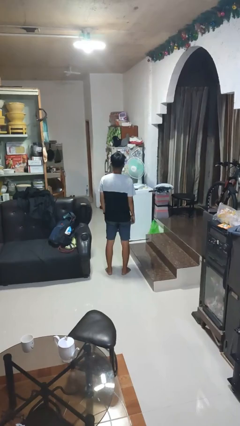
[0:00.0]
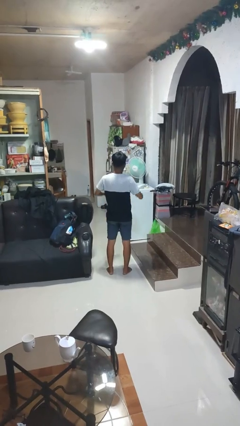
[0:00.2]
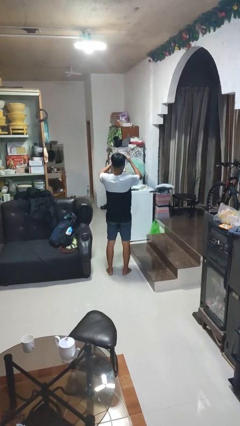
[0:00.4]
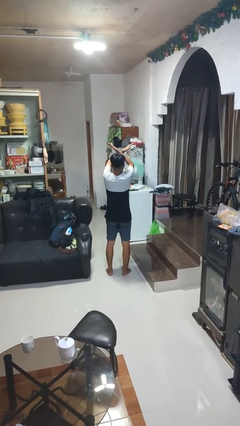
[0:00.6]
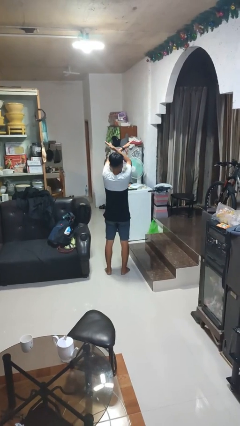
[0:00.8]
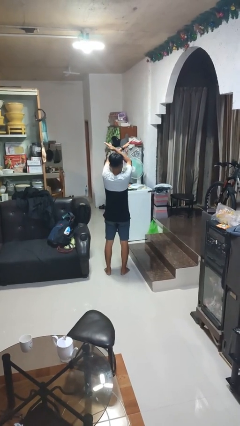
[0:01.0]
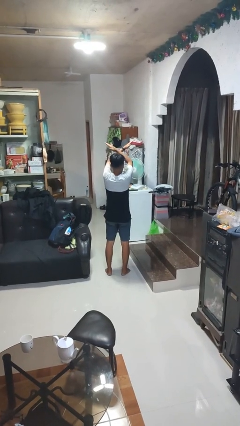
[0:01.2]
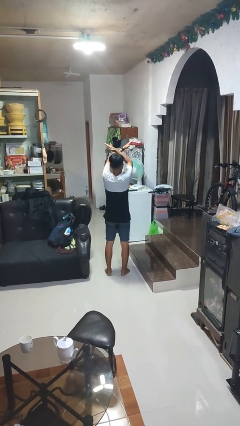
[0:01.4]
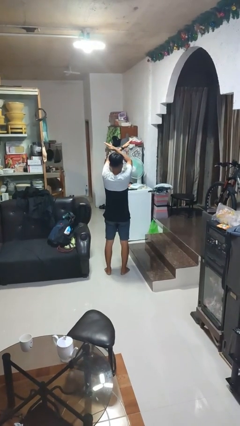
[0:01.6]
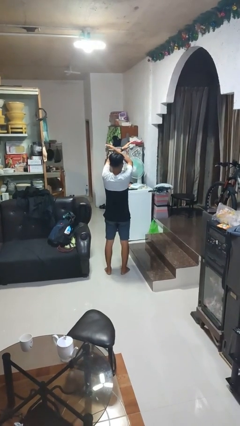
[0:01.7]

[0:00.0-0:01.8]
person gestures arms x

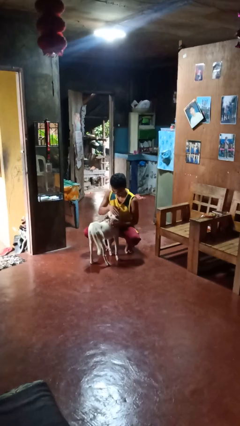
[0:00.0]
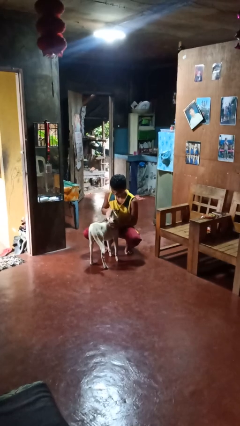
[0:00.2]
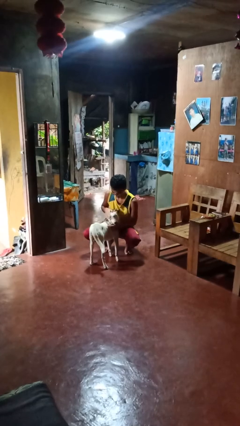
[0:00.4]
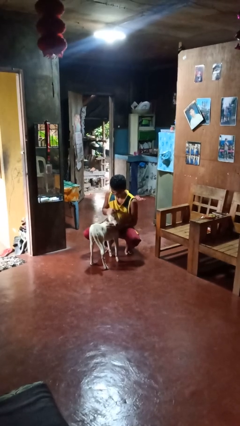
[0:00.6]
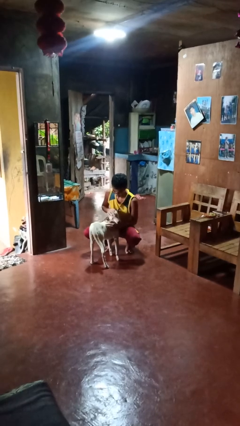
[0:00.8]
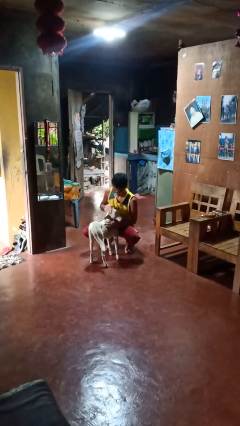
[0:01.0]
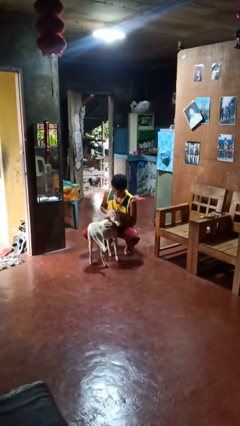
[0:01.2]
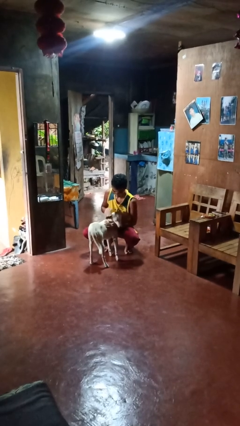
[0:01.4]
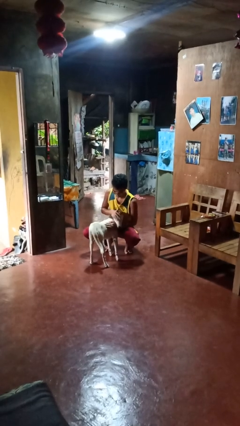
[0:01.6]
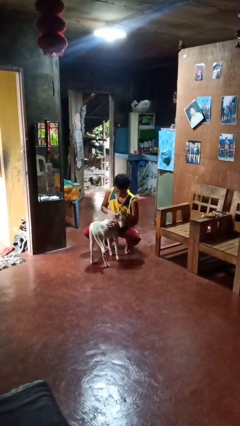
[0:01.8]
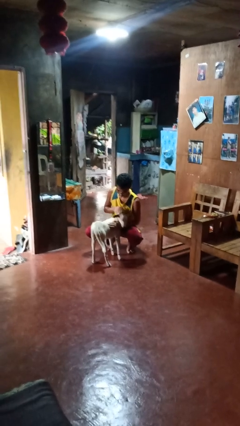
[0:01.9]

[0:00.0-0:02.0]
person pets dog

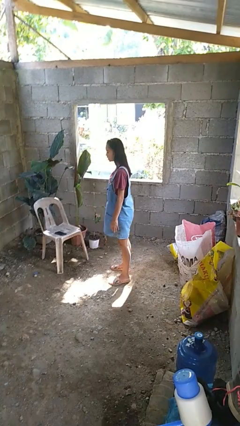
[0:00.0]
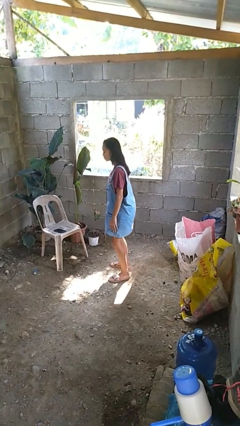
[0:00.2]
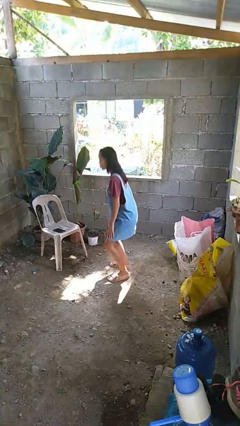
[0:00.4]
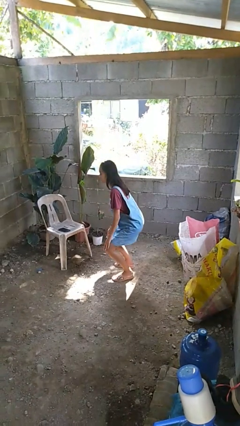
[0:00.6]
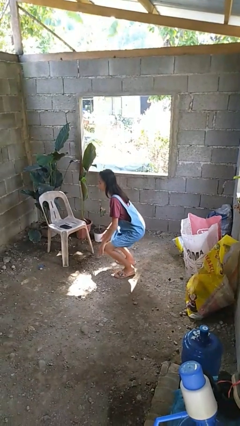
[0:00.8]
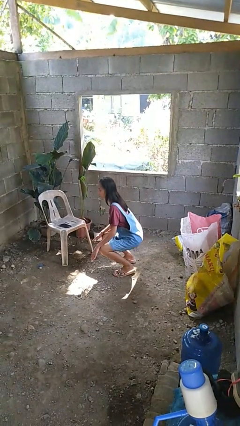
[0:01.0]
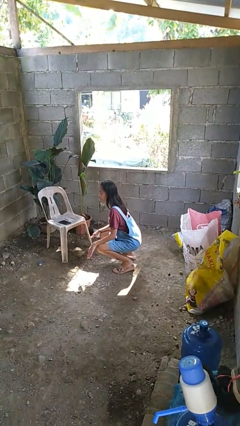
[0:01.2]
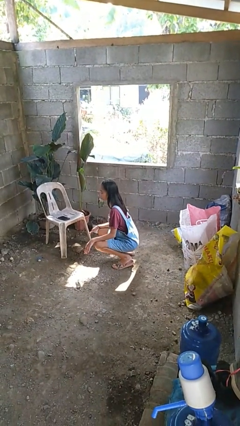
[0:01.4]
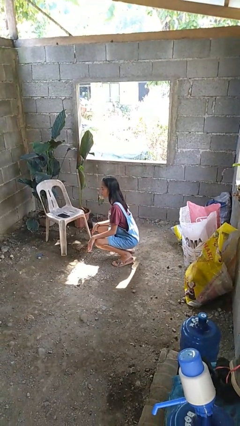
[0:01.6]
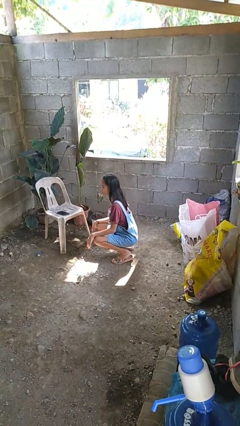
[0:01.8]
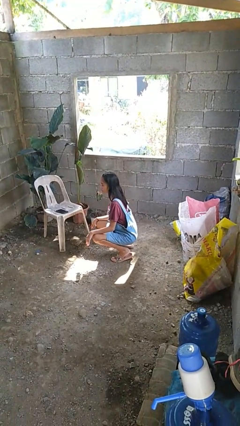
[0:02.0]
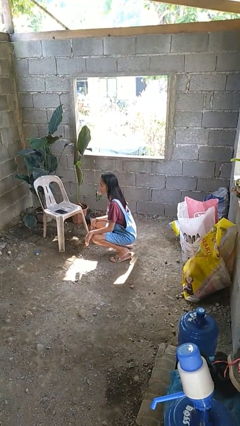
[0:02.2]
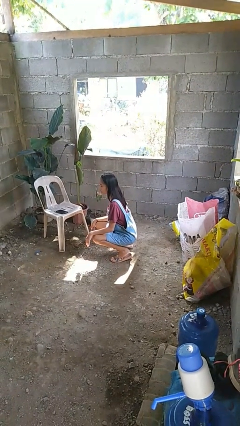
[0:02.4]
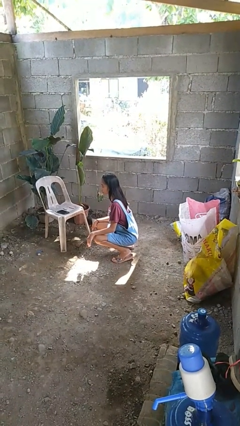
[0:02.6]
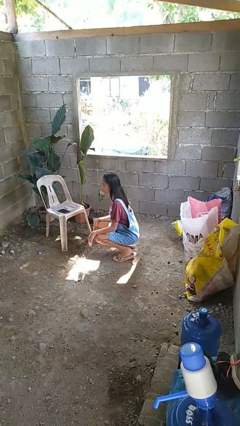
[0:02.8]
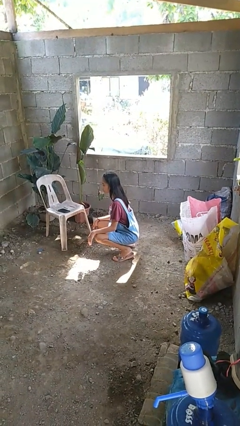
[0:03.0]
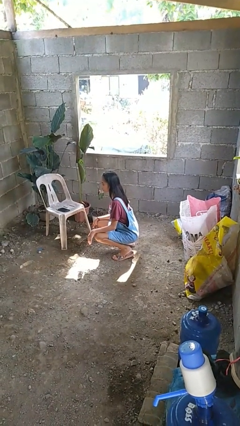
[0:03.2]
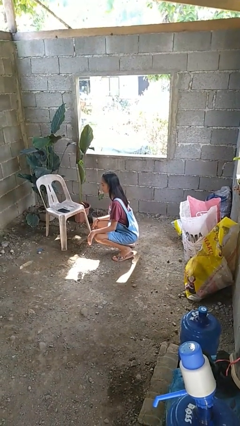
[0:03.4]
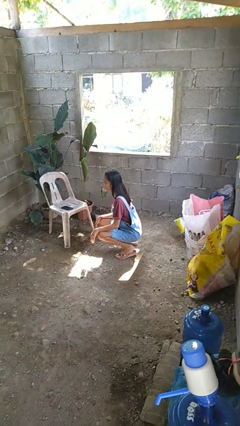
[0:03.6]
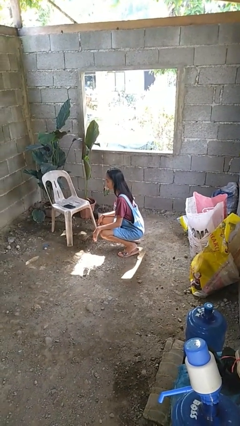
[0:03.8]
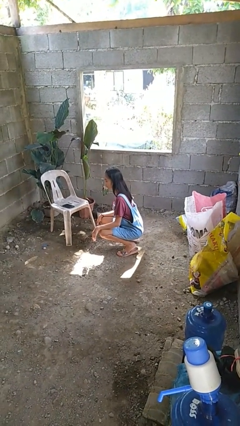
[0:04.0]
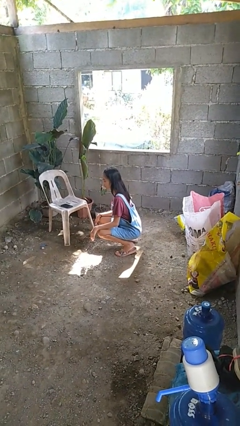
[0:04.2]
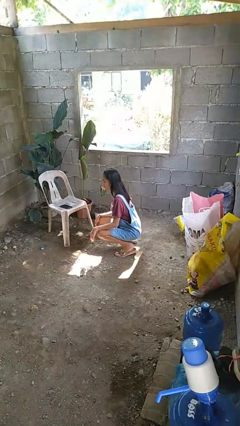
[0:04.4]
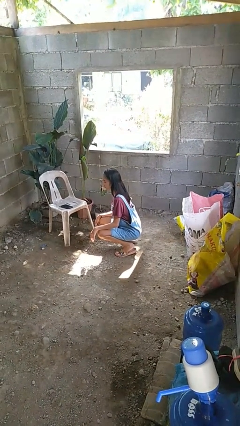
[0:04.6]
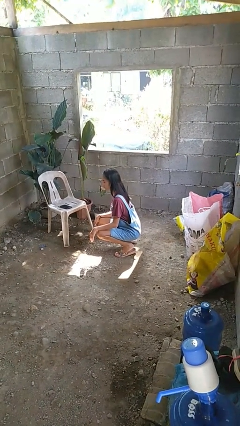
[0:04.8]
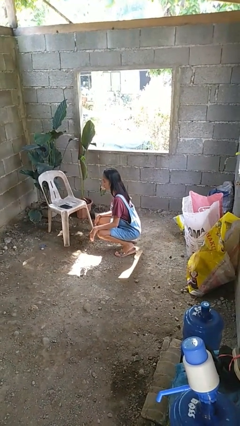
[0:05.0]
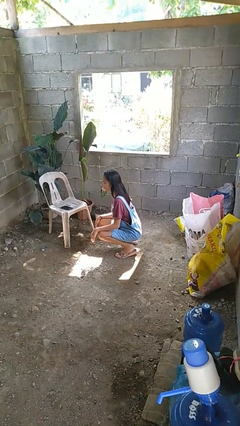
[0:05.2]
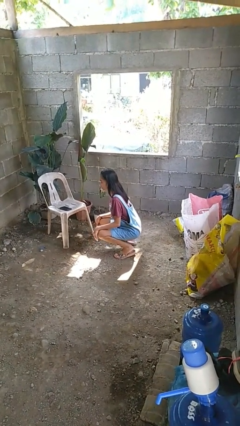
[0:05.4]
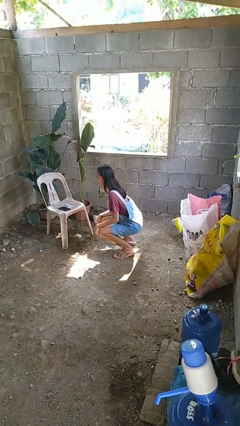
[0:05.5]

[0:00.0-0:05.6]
person squats

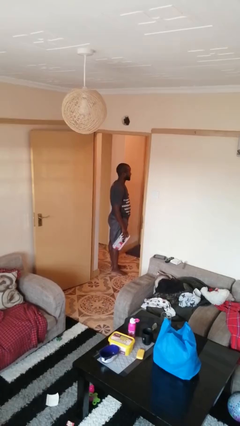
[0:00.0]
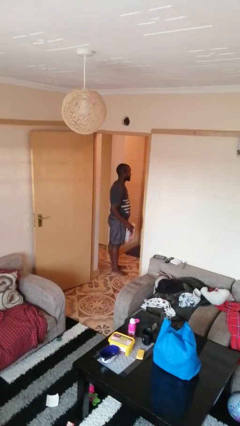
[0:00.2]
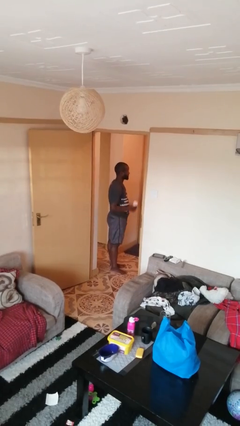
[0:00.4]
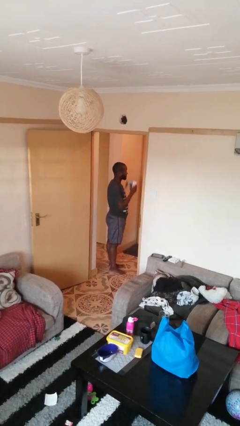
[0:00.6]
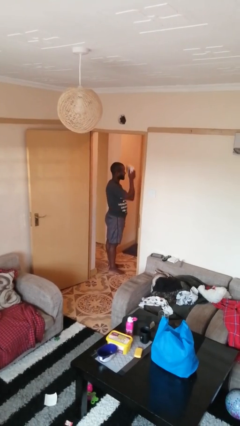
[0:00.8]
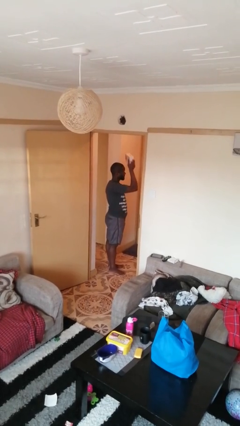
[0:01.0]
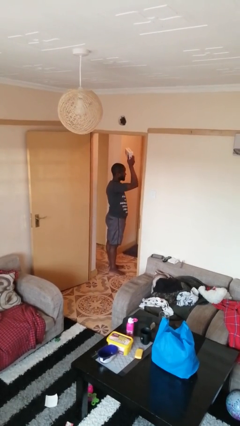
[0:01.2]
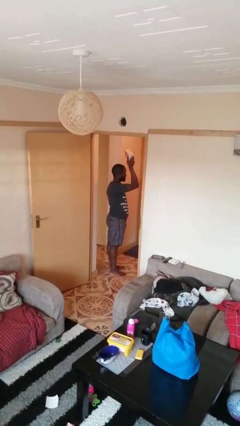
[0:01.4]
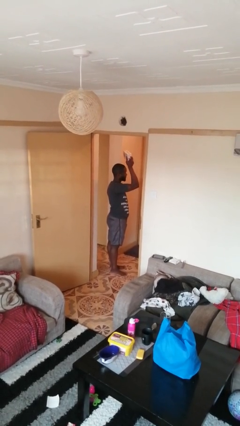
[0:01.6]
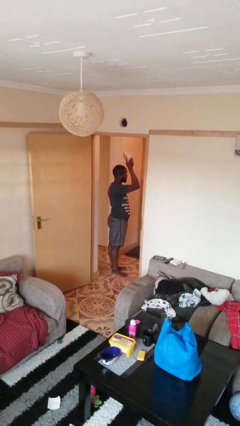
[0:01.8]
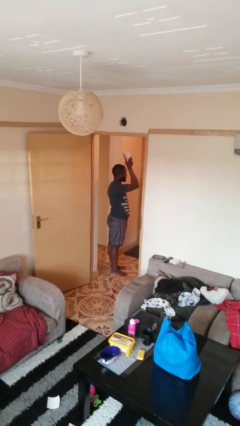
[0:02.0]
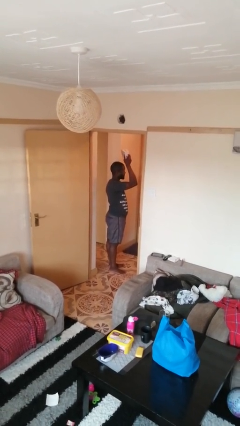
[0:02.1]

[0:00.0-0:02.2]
person holds object above head

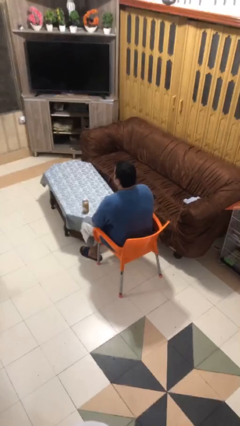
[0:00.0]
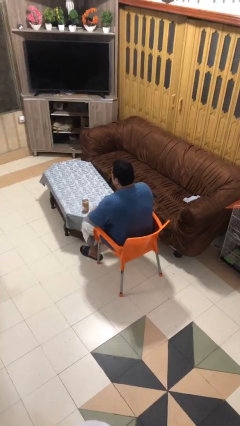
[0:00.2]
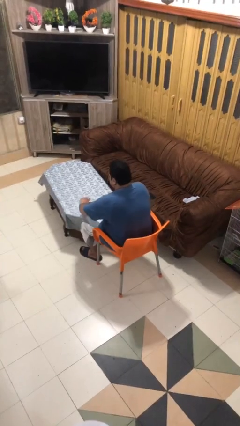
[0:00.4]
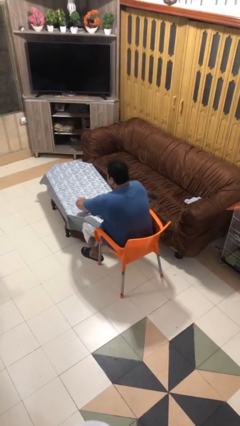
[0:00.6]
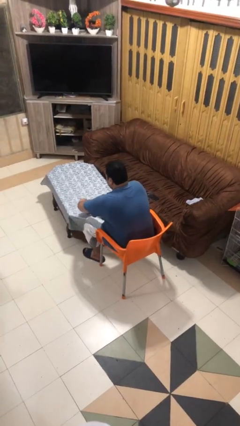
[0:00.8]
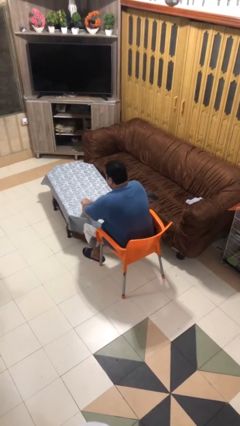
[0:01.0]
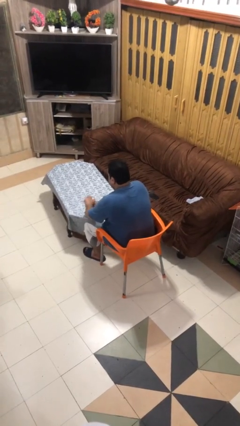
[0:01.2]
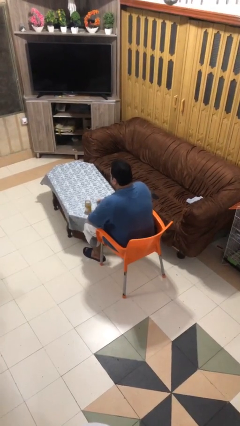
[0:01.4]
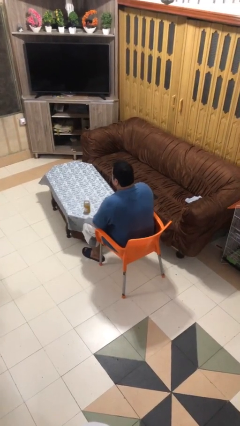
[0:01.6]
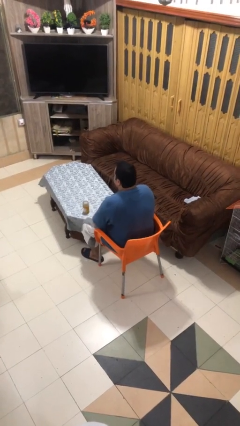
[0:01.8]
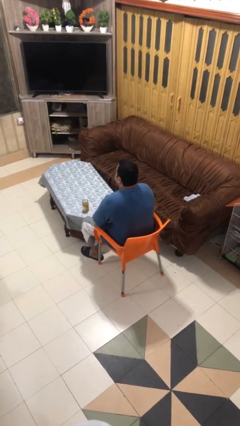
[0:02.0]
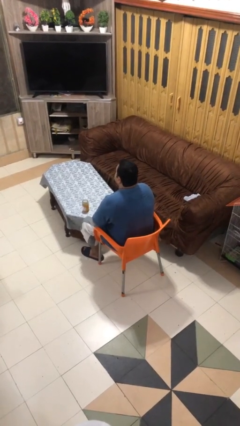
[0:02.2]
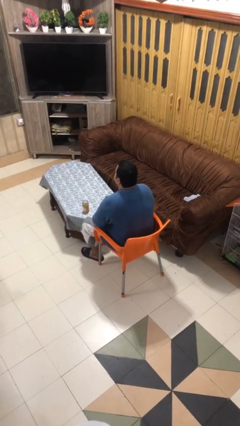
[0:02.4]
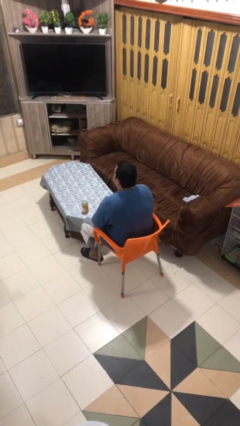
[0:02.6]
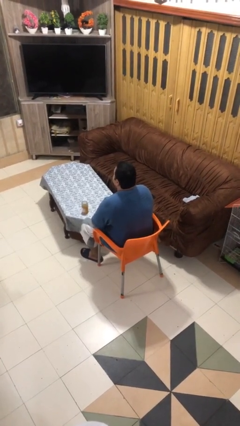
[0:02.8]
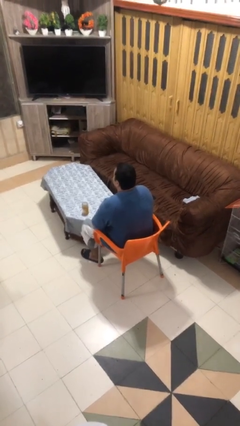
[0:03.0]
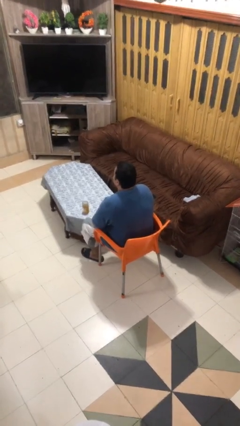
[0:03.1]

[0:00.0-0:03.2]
person opens jar

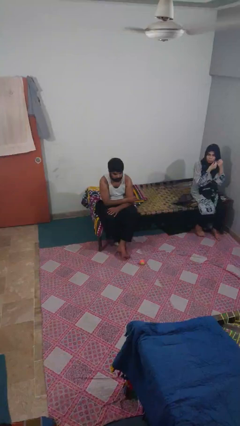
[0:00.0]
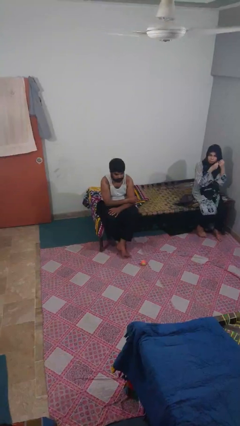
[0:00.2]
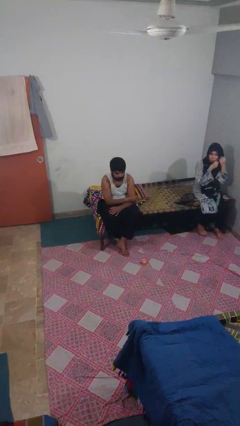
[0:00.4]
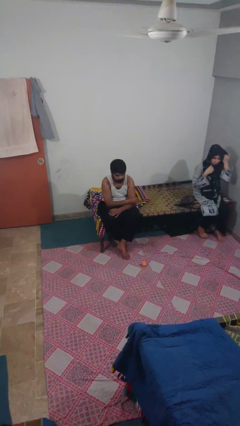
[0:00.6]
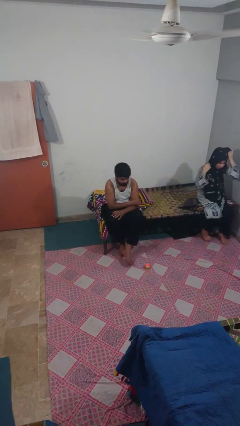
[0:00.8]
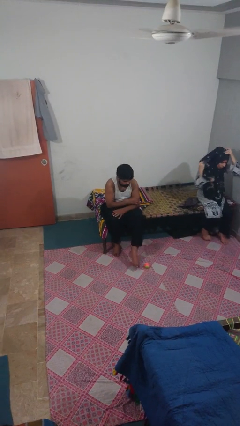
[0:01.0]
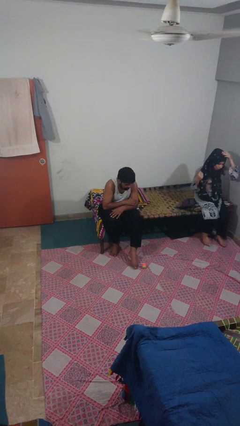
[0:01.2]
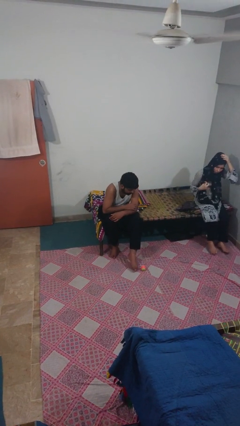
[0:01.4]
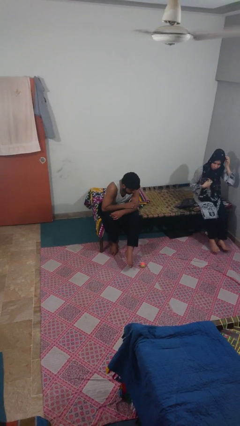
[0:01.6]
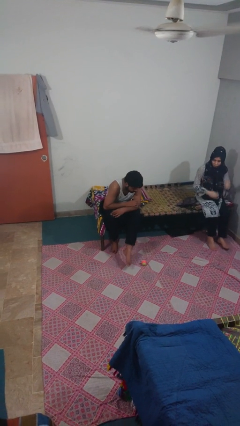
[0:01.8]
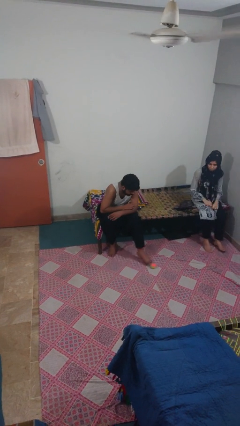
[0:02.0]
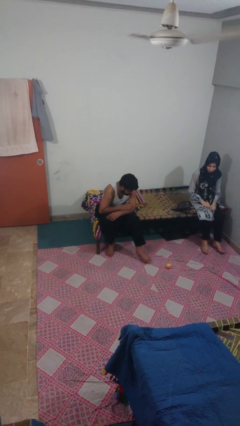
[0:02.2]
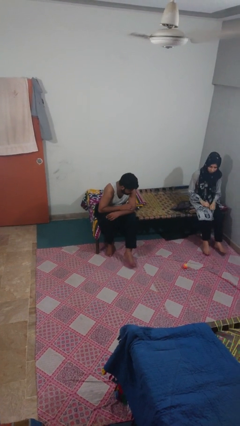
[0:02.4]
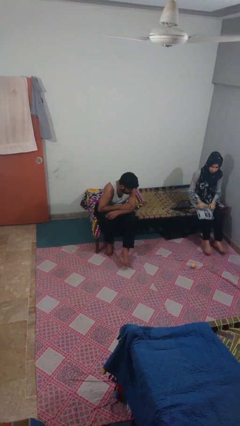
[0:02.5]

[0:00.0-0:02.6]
person kicks object to person
